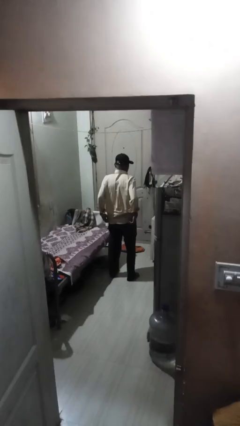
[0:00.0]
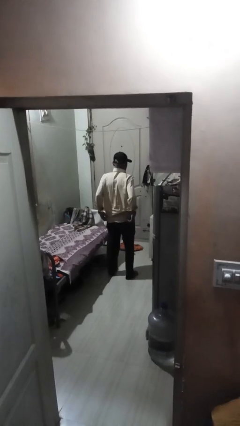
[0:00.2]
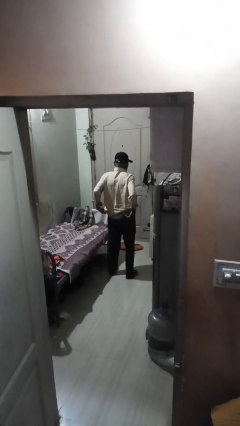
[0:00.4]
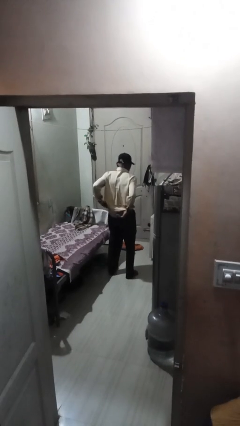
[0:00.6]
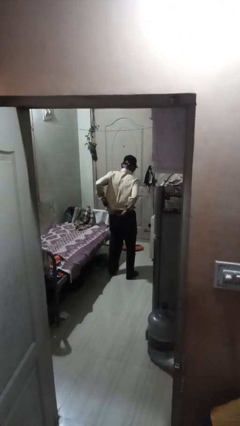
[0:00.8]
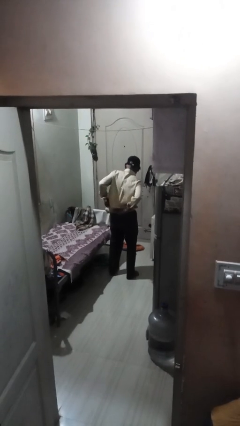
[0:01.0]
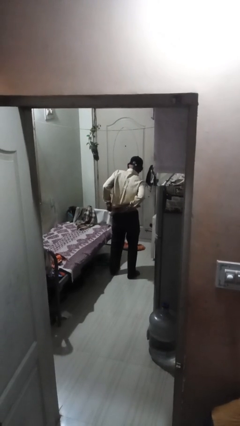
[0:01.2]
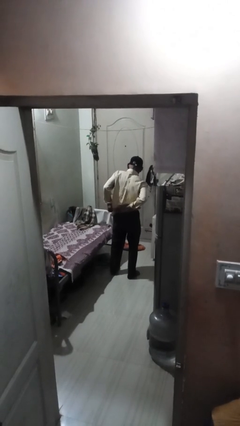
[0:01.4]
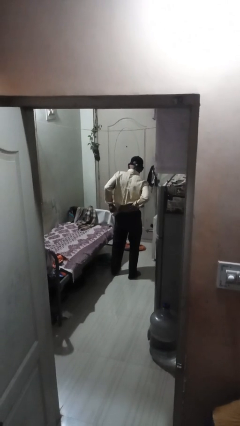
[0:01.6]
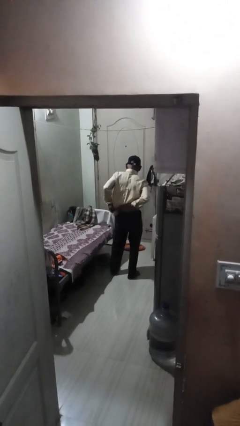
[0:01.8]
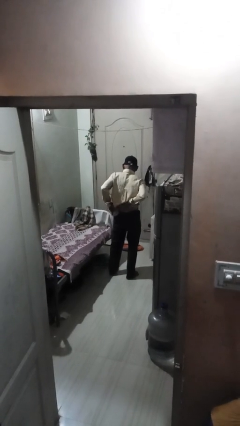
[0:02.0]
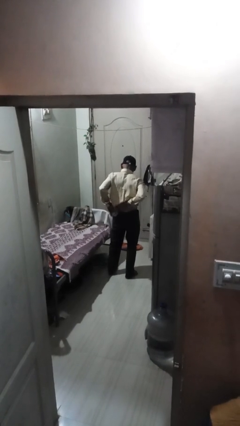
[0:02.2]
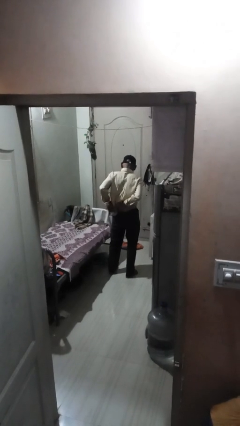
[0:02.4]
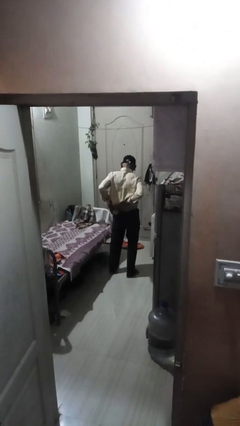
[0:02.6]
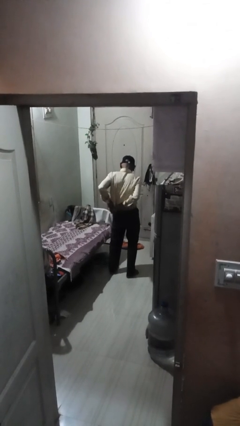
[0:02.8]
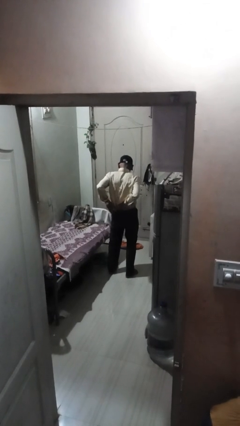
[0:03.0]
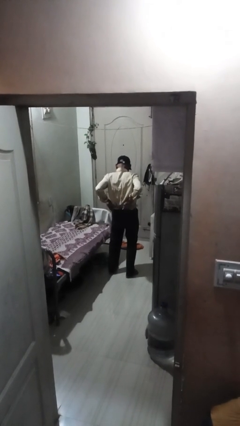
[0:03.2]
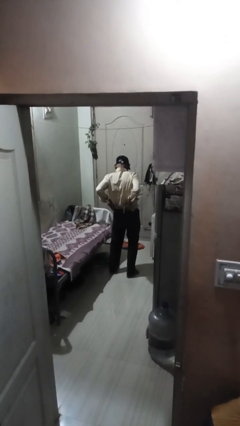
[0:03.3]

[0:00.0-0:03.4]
person tucks in shirt

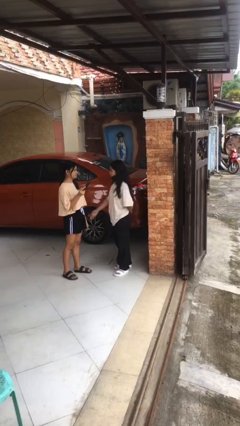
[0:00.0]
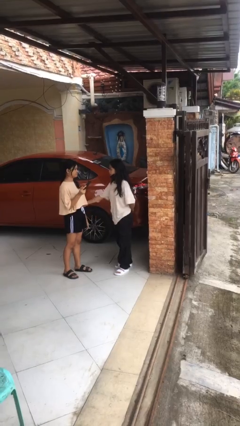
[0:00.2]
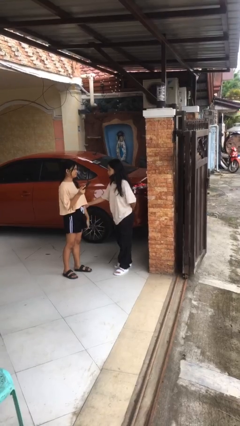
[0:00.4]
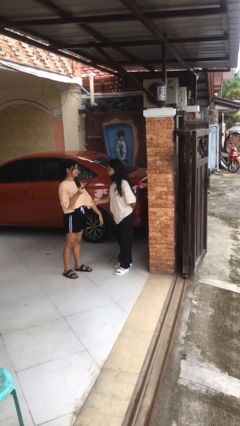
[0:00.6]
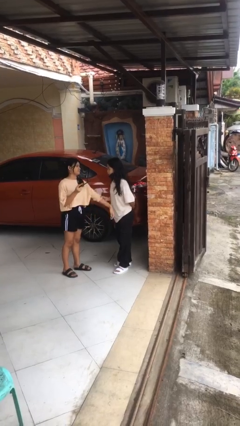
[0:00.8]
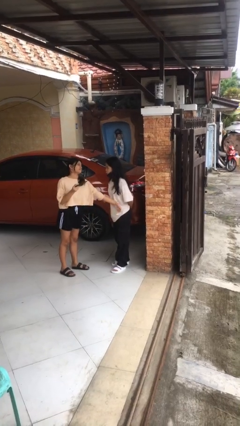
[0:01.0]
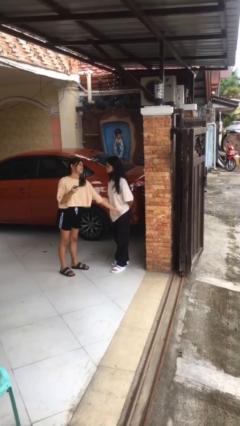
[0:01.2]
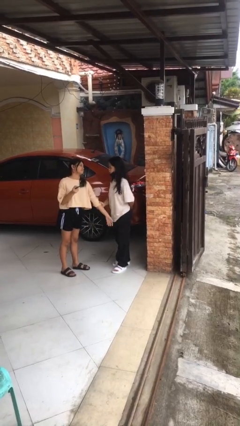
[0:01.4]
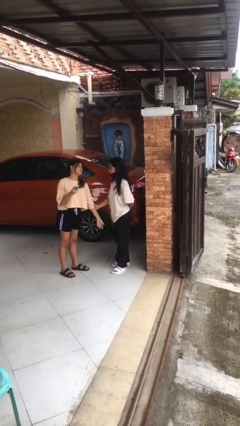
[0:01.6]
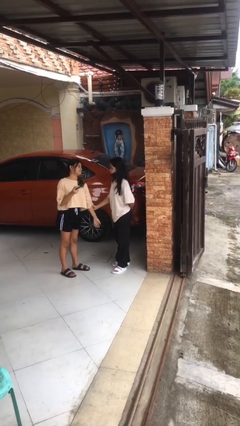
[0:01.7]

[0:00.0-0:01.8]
person grabs person by forearm

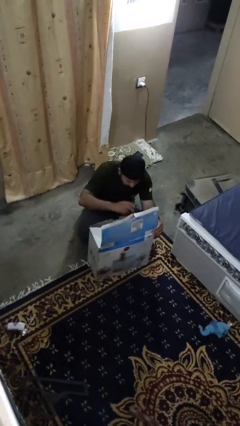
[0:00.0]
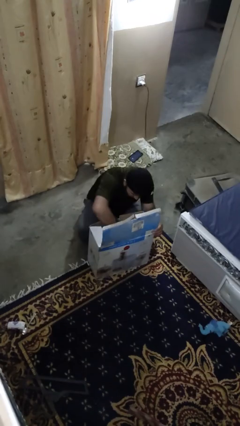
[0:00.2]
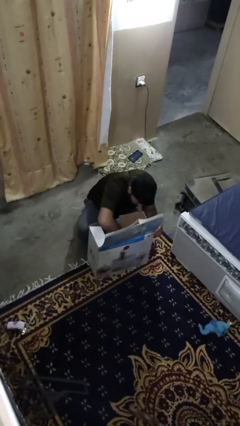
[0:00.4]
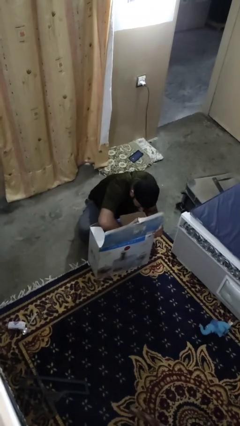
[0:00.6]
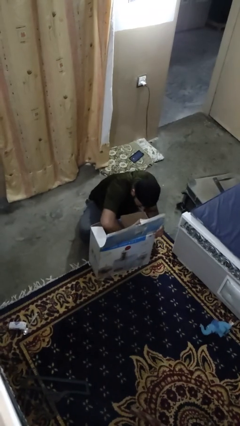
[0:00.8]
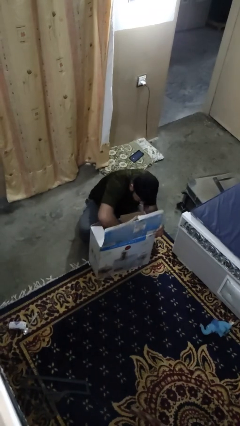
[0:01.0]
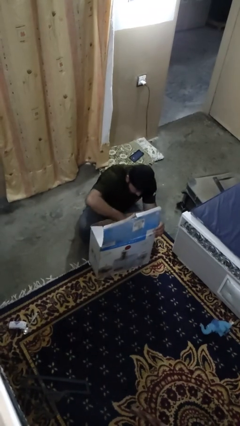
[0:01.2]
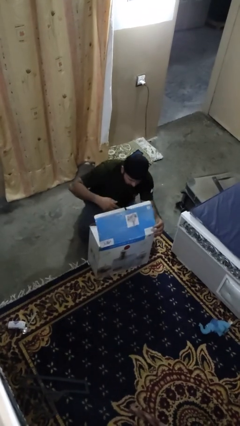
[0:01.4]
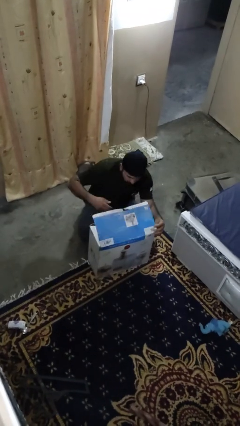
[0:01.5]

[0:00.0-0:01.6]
person searches in box

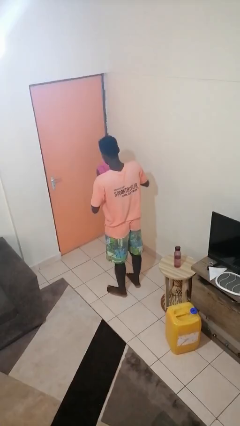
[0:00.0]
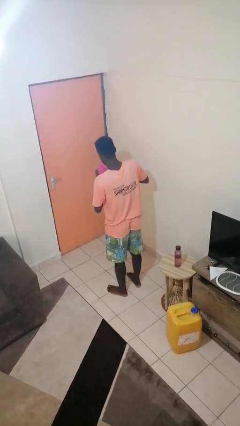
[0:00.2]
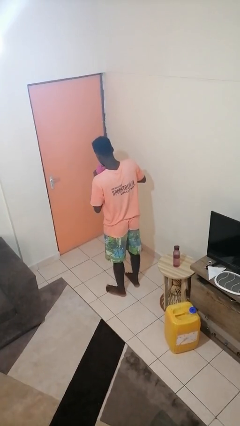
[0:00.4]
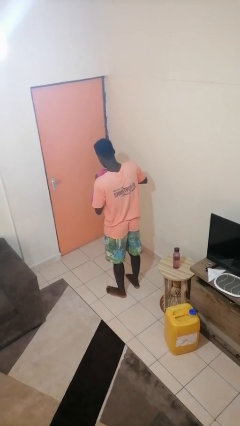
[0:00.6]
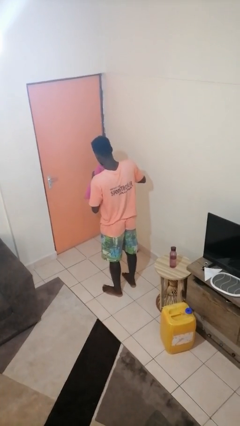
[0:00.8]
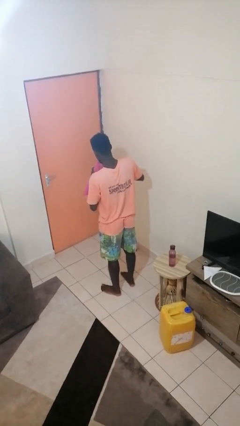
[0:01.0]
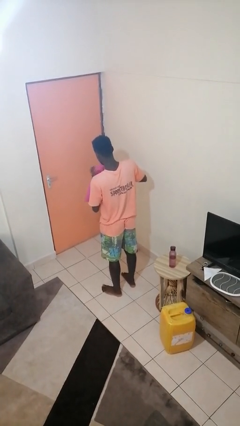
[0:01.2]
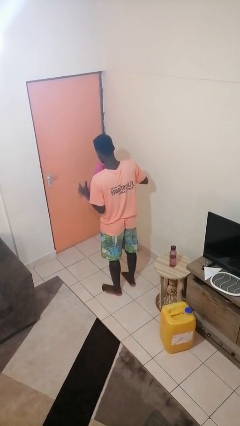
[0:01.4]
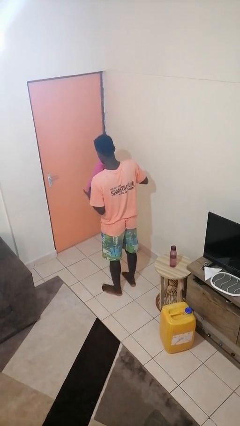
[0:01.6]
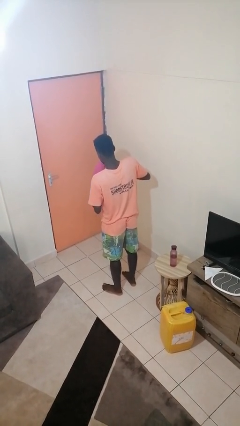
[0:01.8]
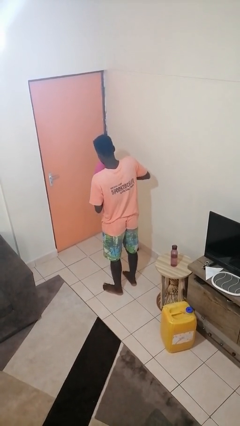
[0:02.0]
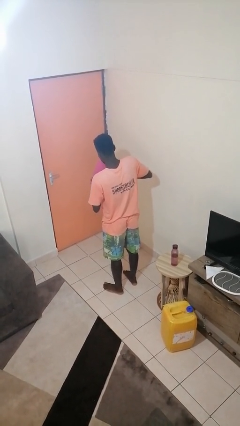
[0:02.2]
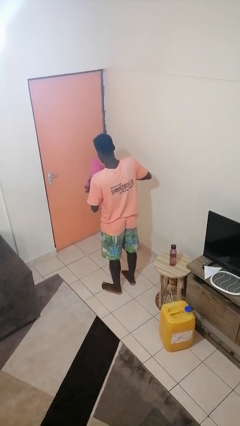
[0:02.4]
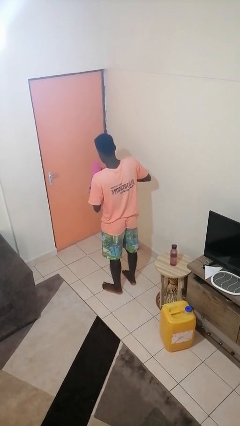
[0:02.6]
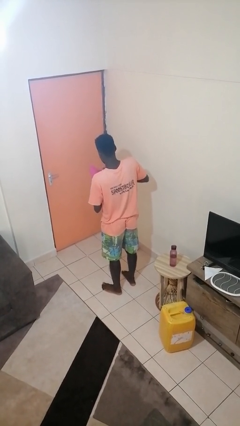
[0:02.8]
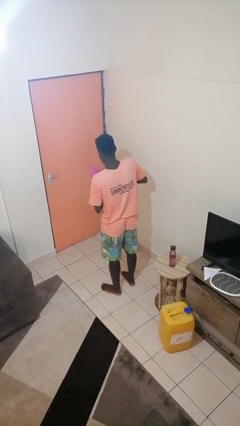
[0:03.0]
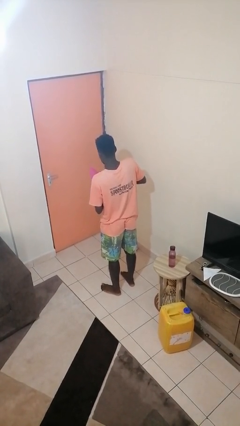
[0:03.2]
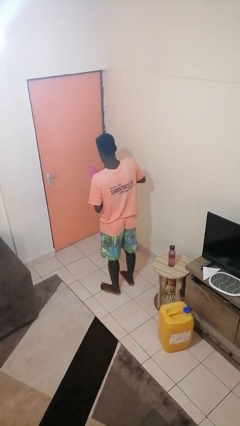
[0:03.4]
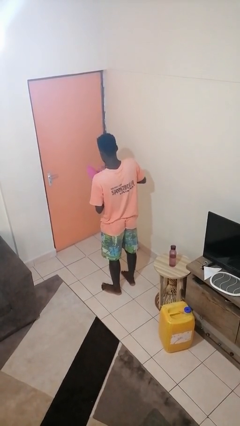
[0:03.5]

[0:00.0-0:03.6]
person squeezes object

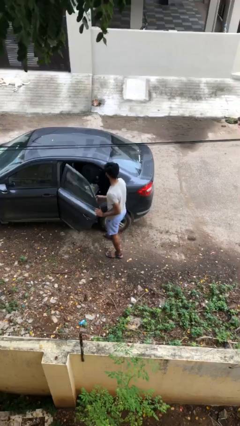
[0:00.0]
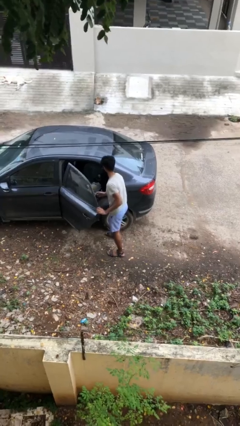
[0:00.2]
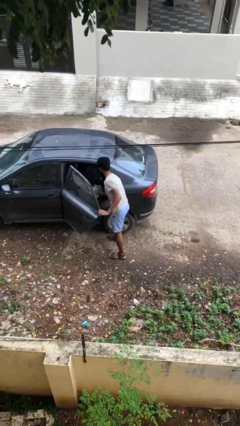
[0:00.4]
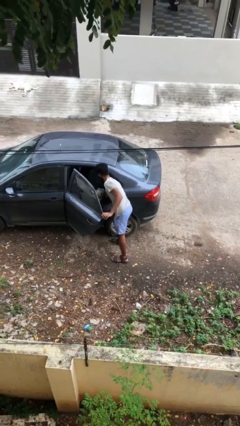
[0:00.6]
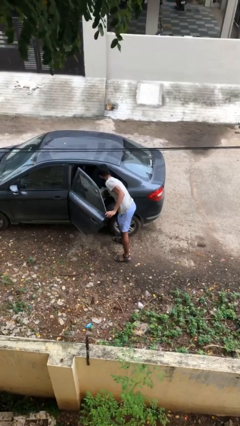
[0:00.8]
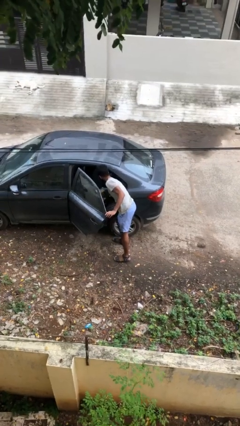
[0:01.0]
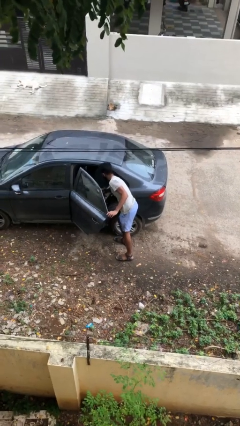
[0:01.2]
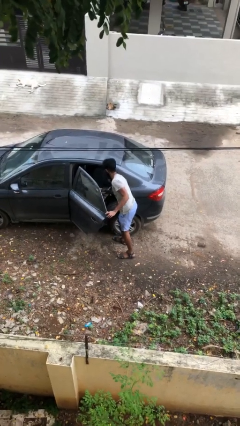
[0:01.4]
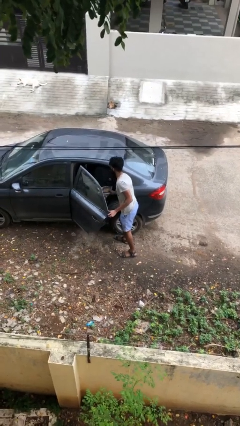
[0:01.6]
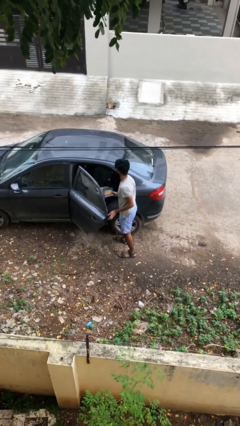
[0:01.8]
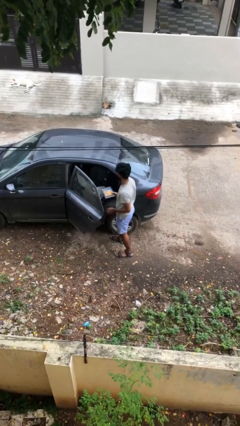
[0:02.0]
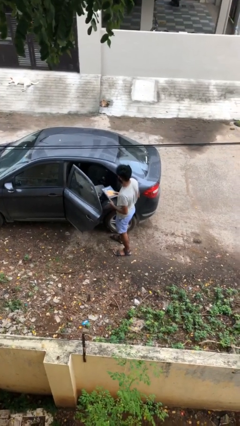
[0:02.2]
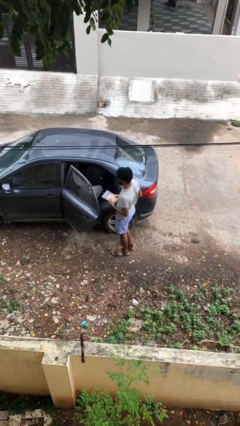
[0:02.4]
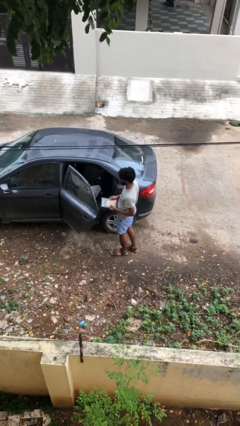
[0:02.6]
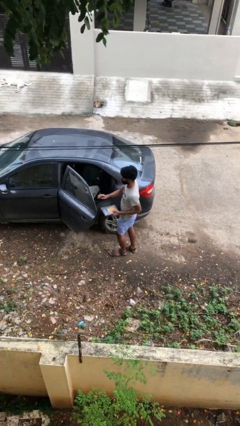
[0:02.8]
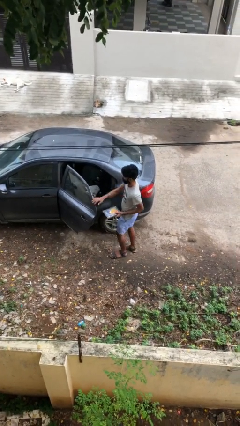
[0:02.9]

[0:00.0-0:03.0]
person unloads car

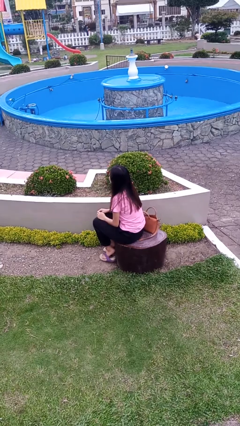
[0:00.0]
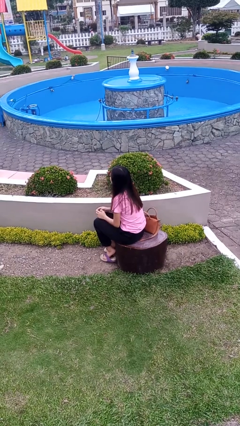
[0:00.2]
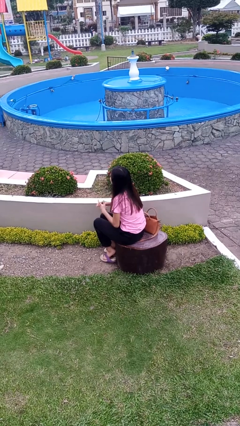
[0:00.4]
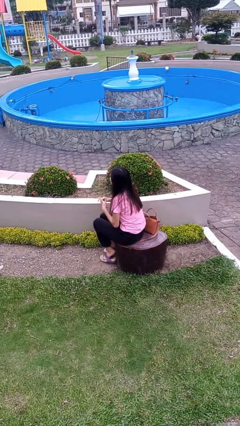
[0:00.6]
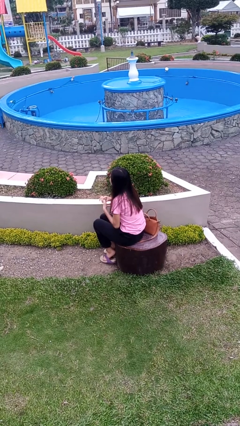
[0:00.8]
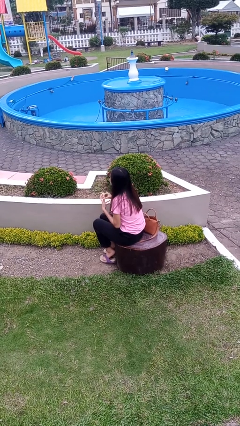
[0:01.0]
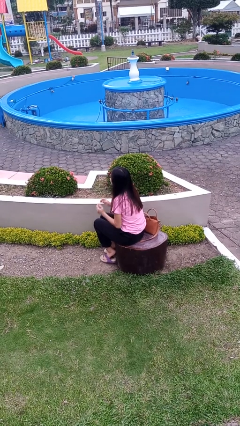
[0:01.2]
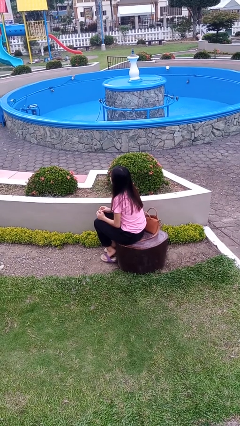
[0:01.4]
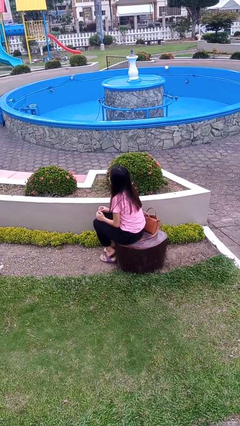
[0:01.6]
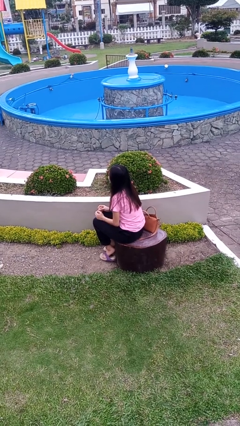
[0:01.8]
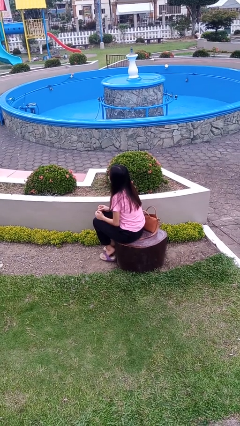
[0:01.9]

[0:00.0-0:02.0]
person takes off ring

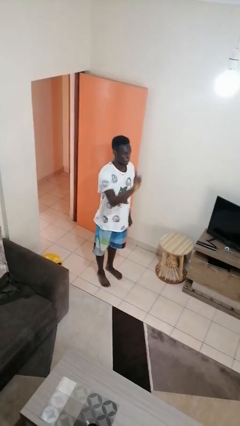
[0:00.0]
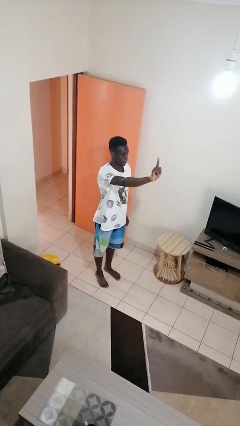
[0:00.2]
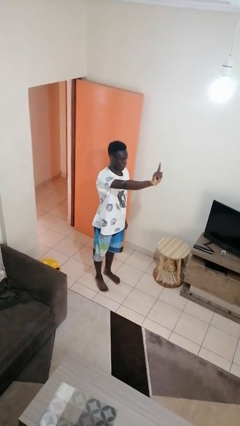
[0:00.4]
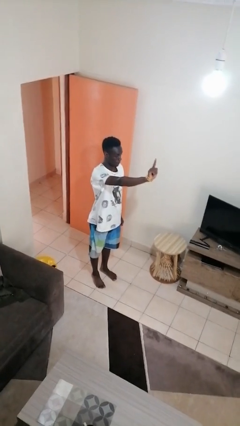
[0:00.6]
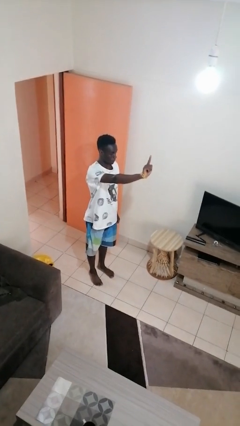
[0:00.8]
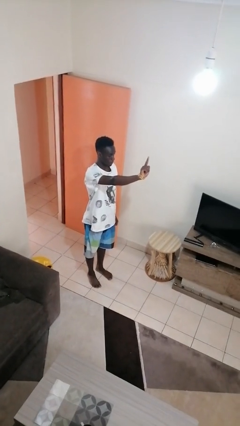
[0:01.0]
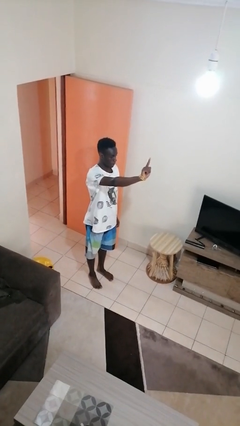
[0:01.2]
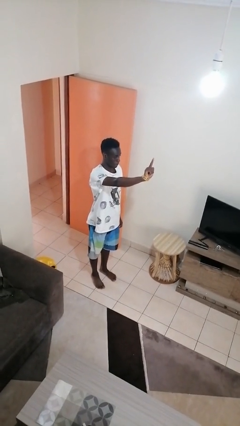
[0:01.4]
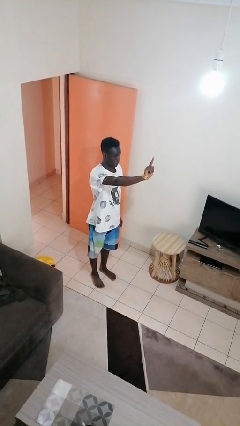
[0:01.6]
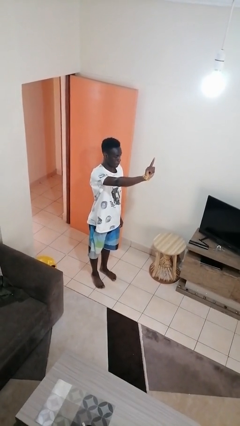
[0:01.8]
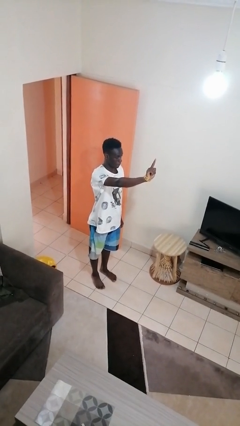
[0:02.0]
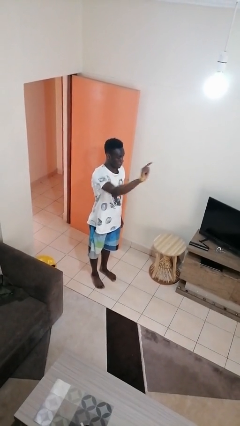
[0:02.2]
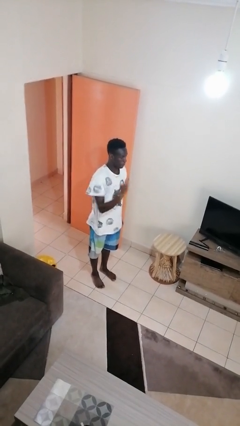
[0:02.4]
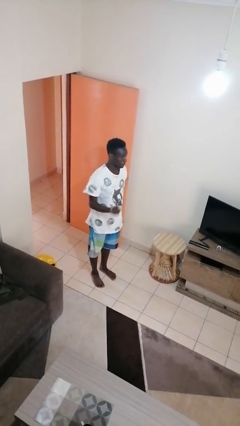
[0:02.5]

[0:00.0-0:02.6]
person gestures number one
